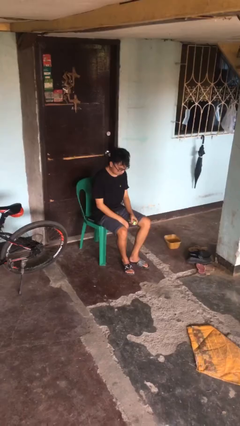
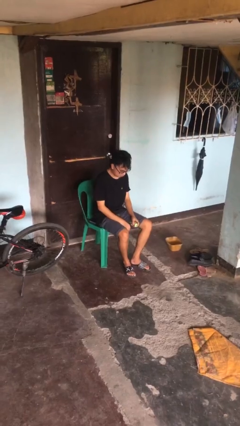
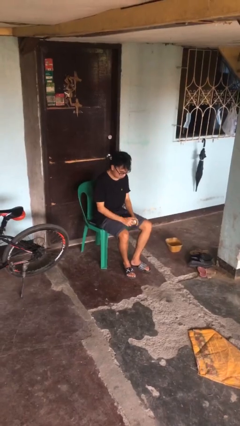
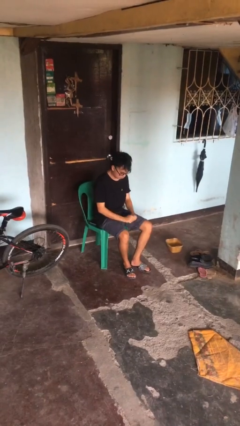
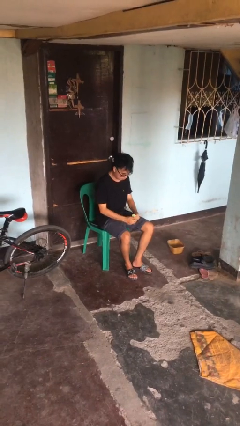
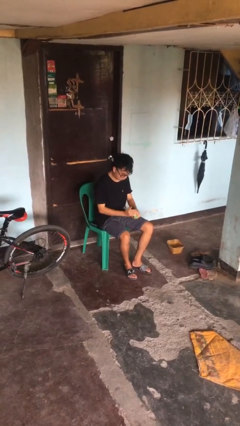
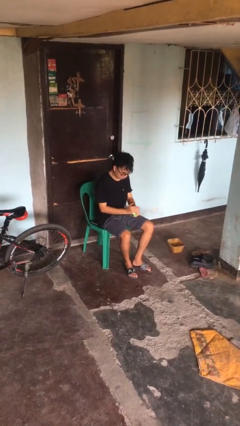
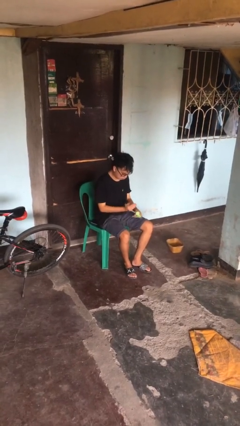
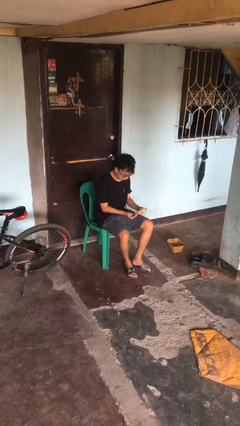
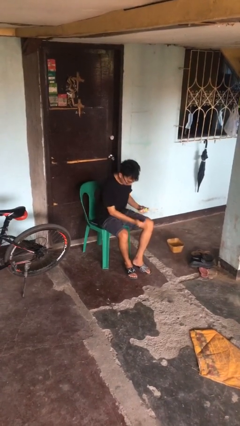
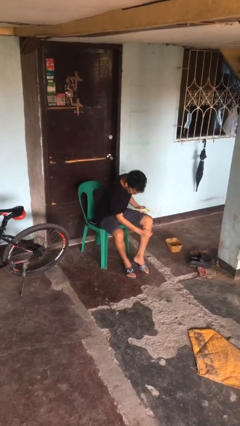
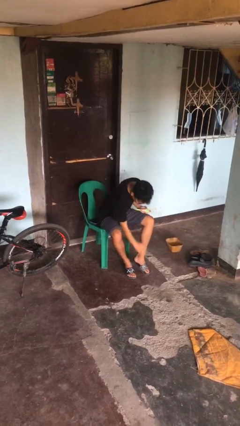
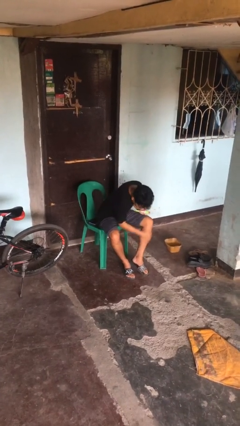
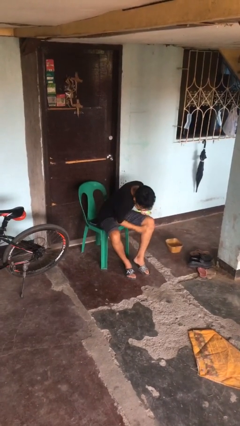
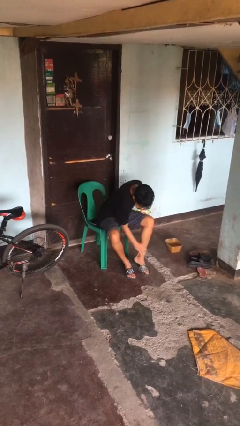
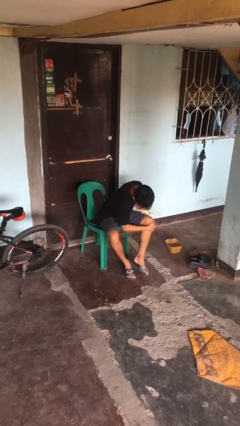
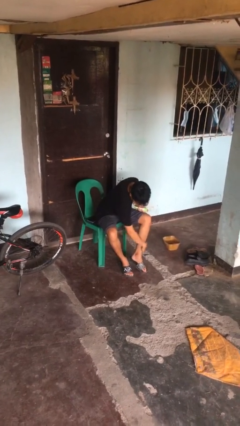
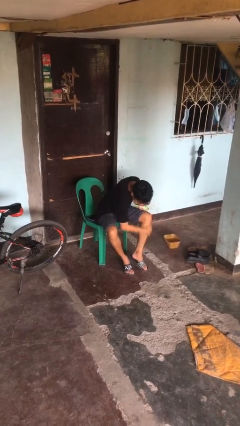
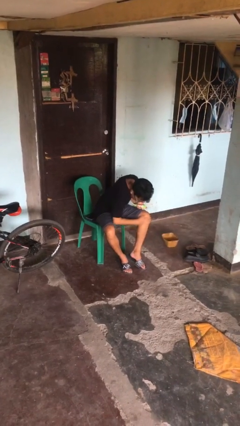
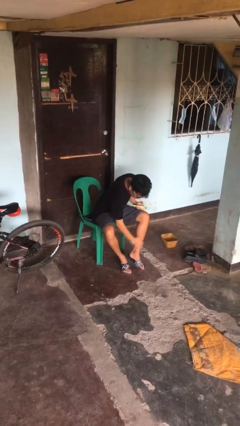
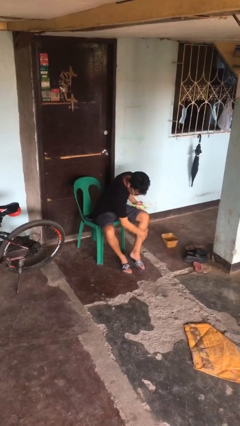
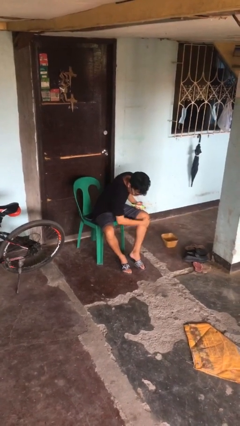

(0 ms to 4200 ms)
person applies sunscreen

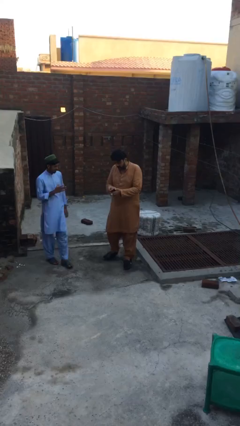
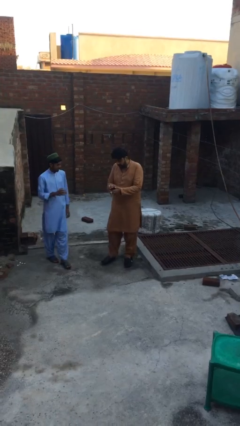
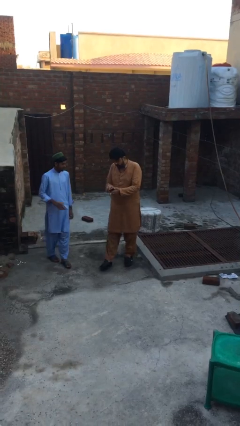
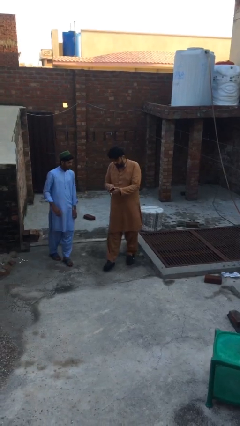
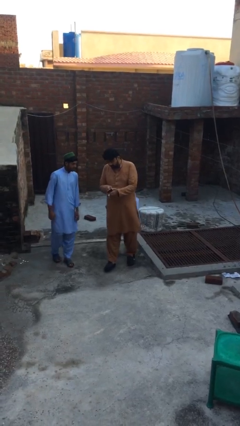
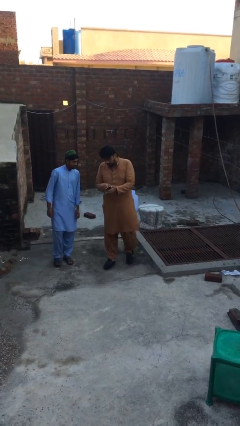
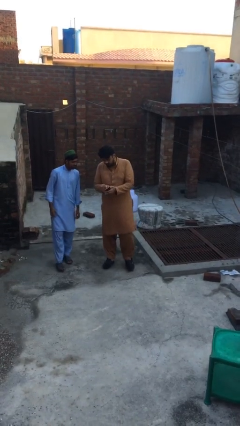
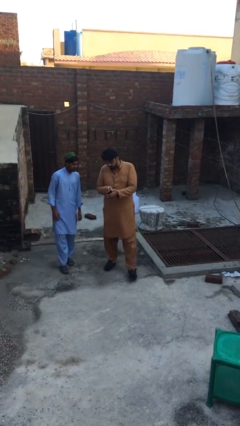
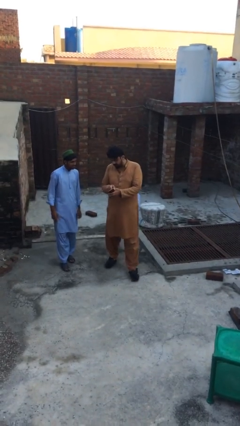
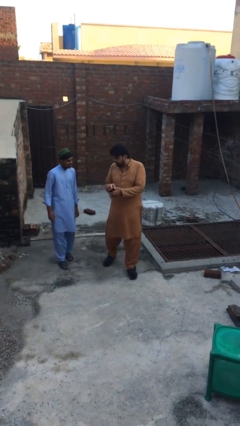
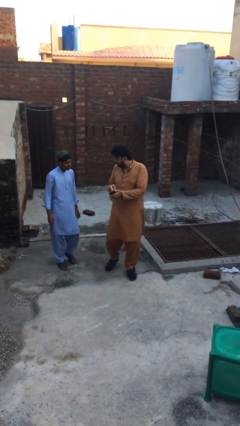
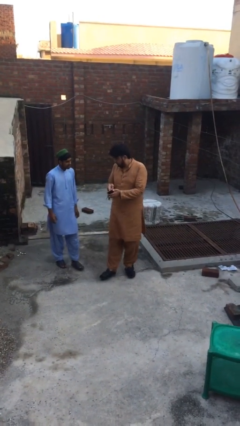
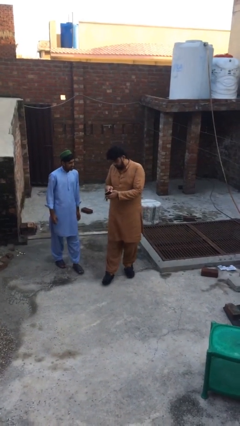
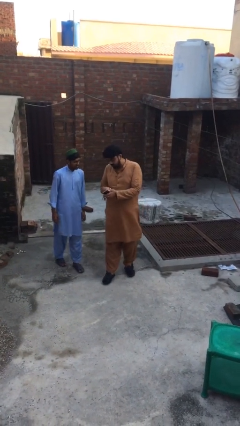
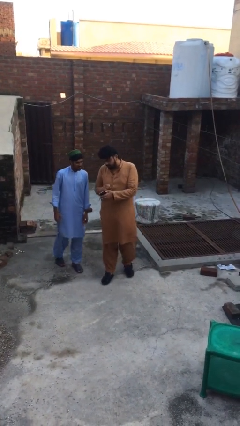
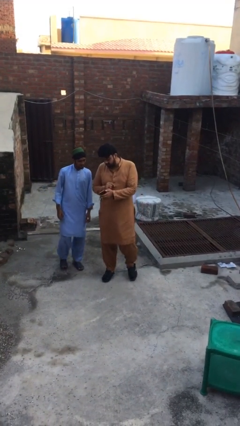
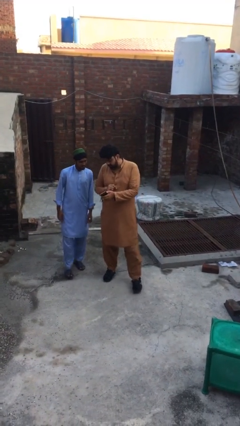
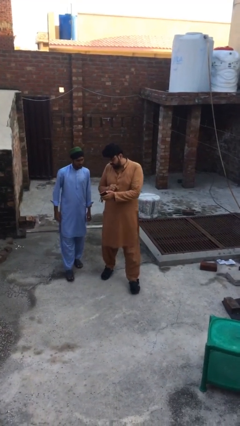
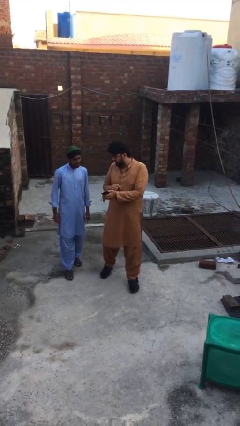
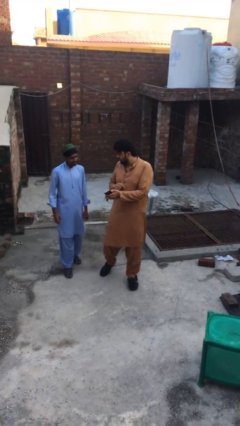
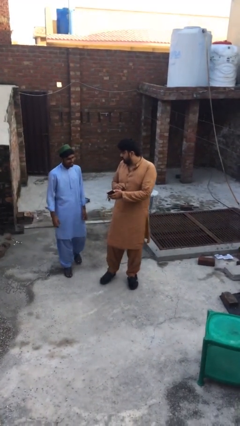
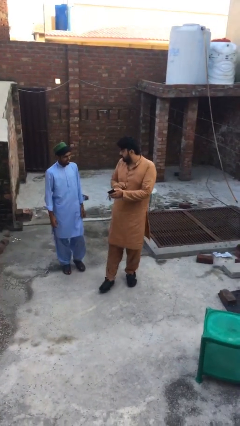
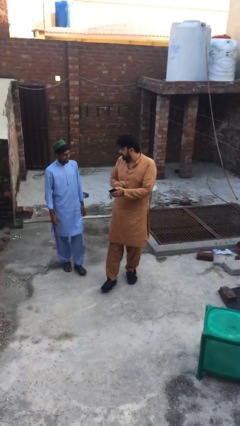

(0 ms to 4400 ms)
person talks to person

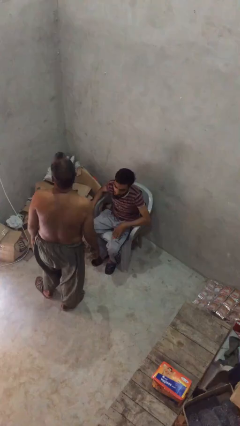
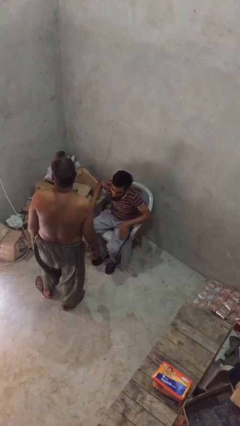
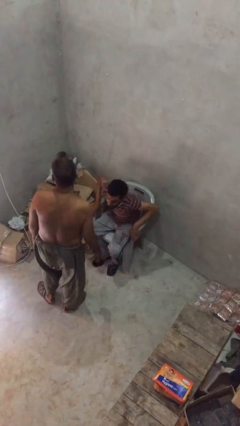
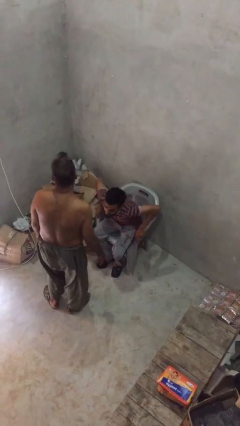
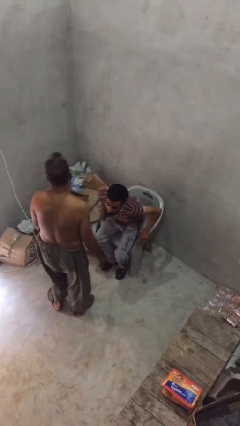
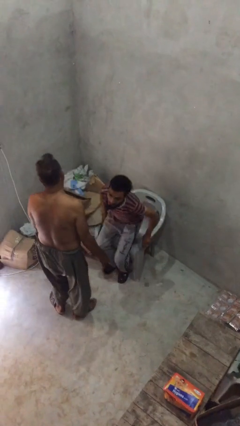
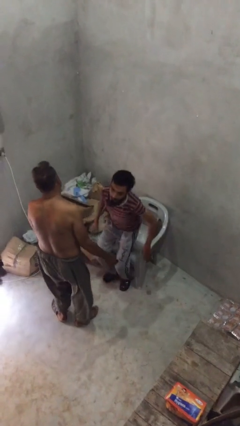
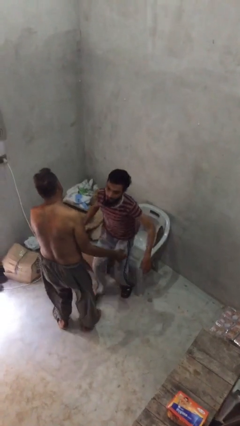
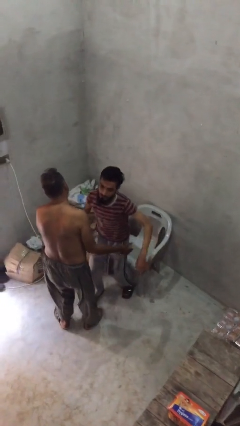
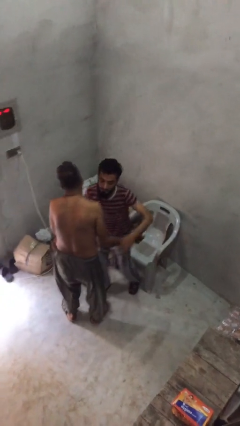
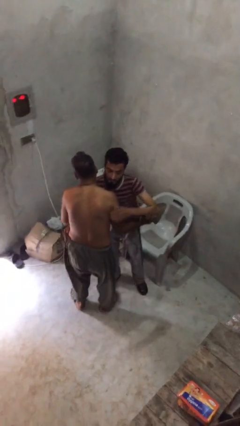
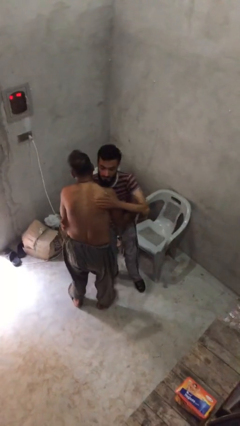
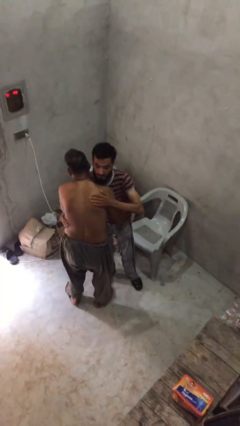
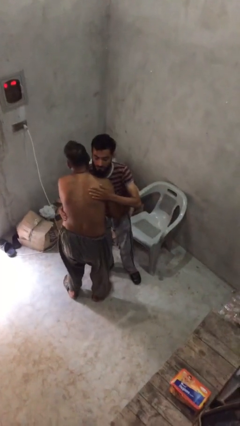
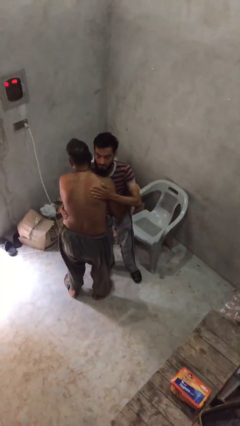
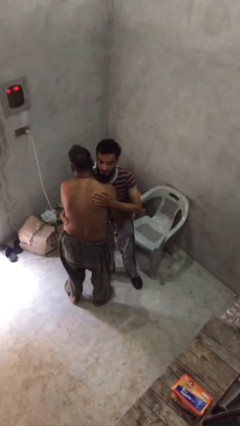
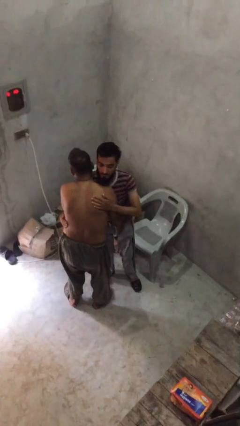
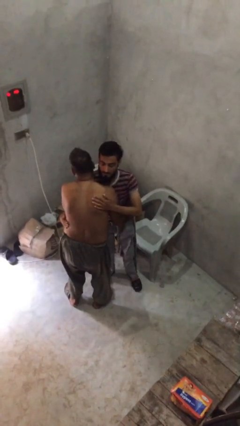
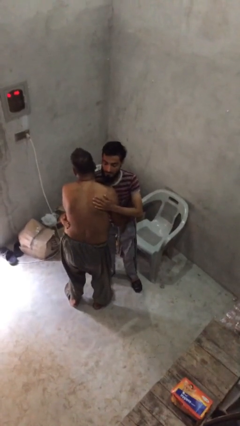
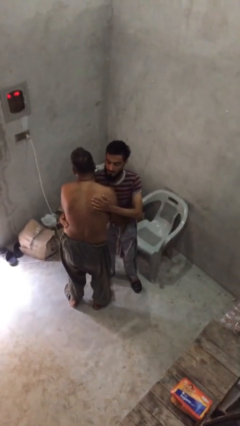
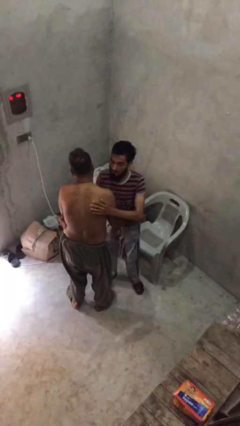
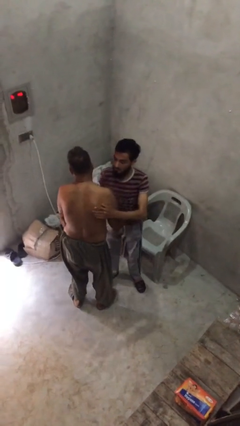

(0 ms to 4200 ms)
person embraces person

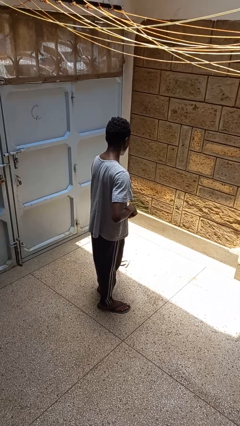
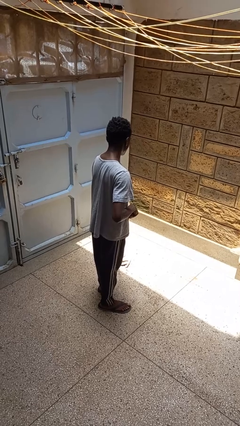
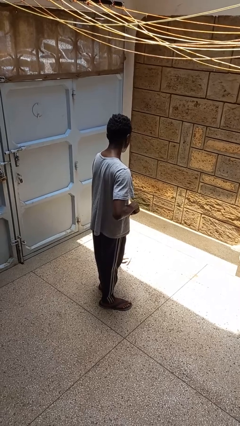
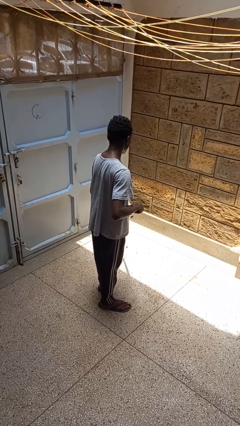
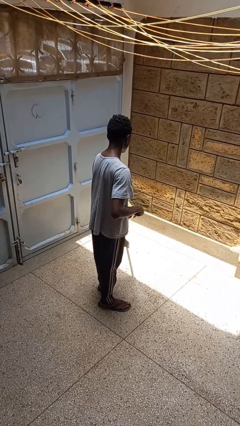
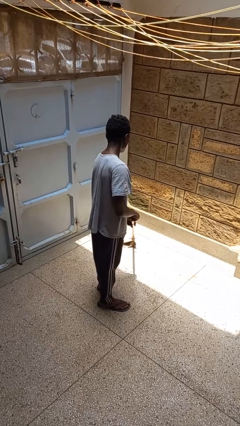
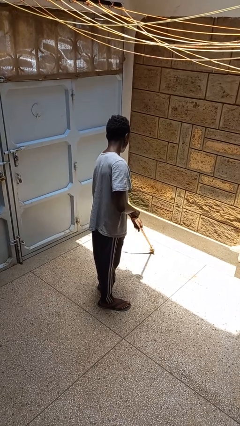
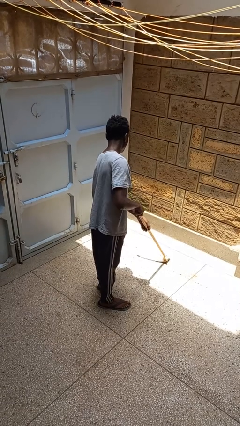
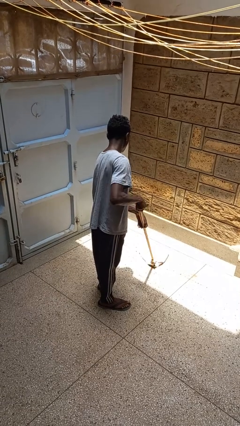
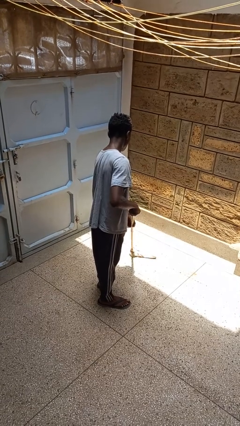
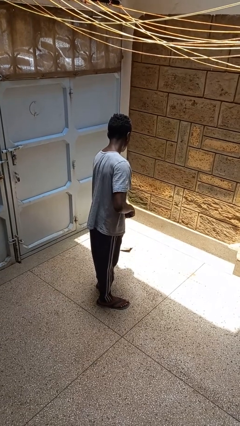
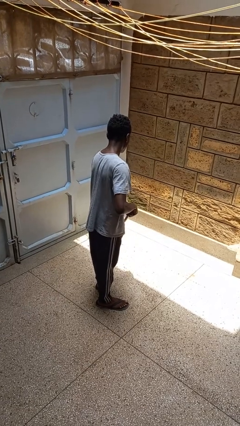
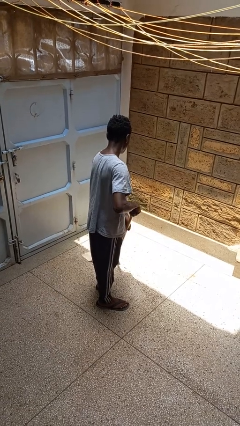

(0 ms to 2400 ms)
person mops

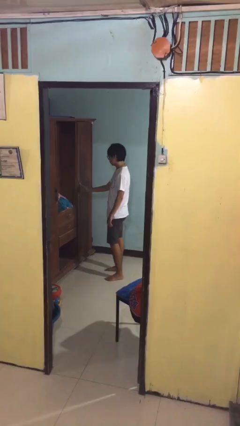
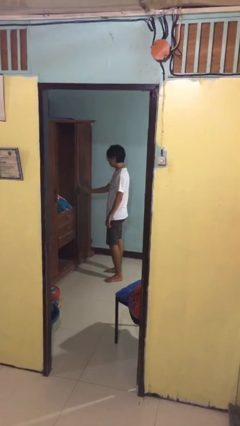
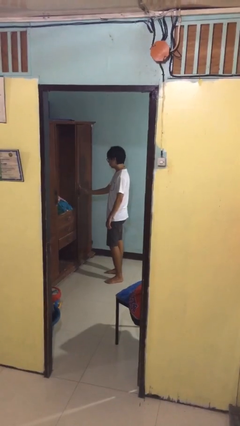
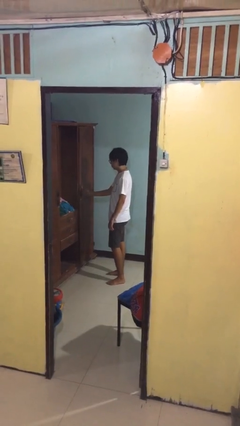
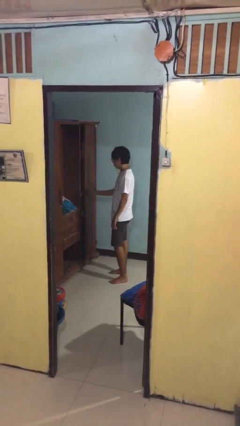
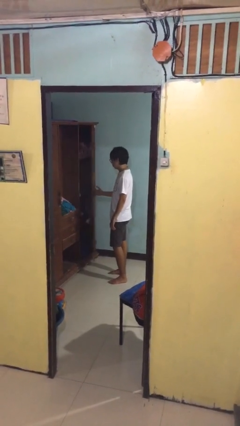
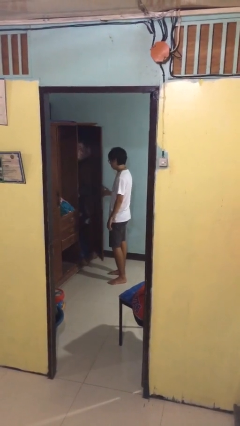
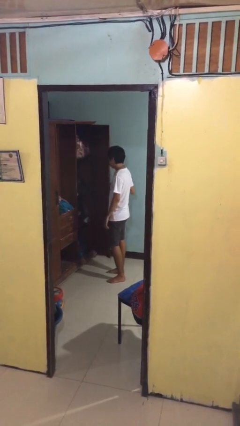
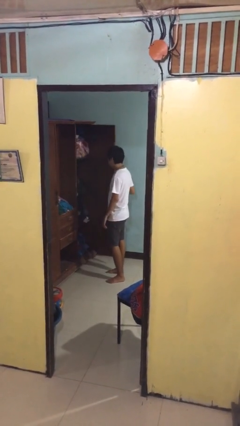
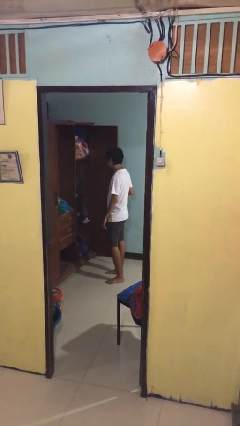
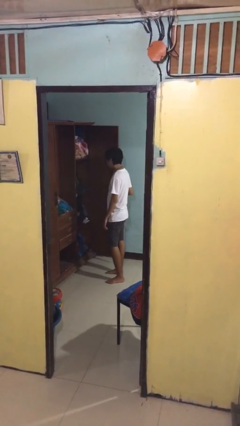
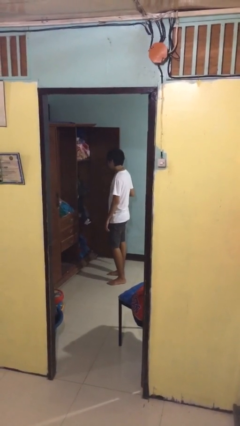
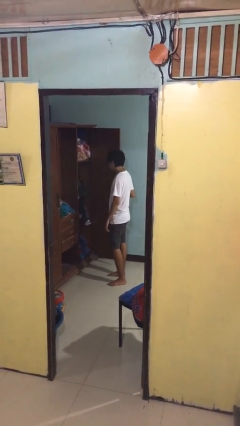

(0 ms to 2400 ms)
person opens closet door
